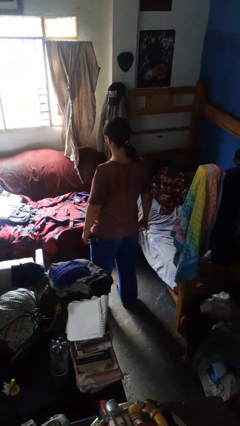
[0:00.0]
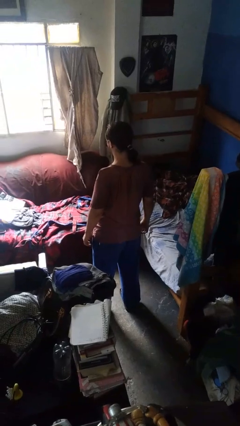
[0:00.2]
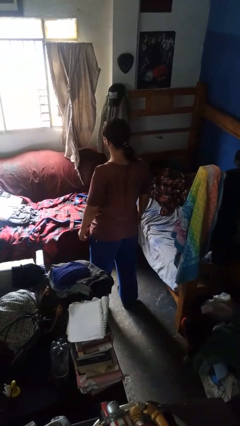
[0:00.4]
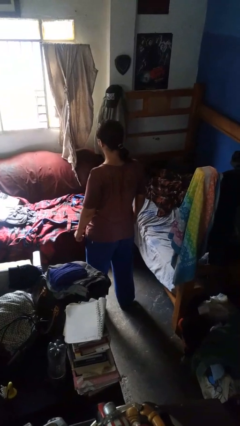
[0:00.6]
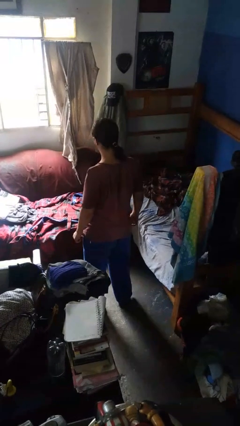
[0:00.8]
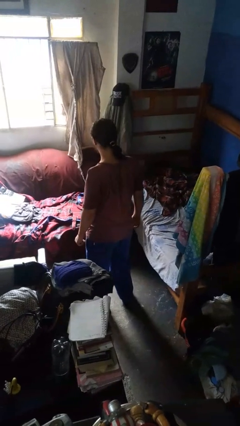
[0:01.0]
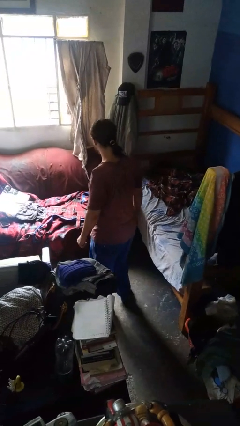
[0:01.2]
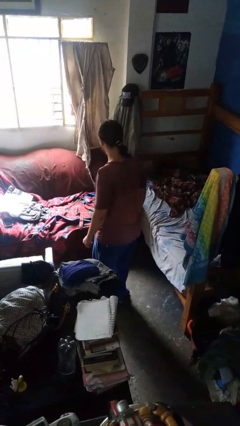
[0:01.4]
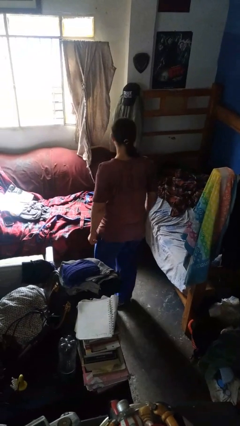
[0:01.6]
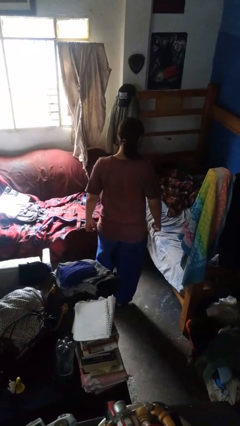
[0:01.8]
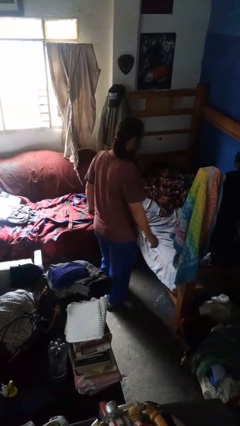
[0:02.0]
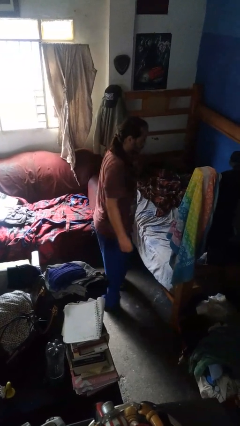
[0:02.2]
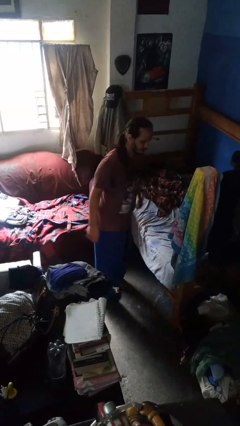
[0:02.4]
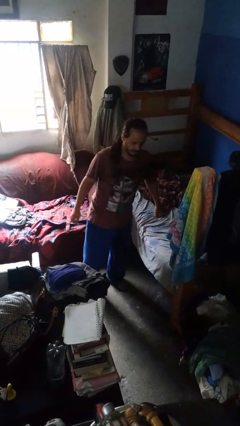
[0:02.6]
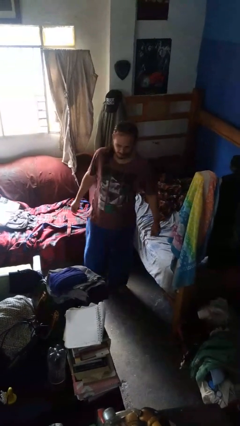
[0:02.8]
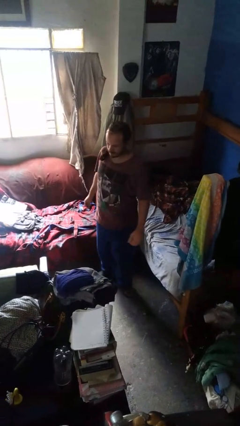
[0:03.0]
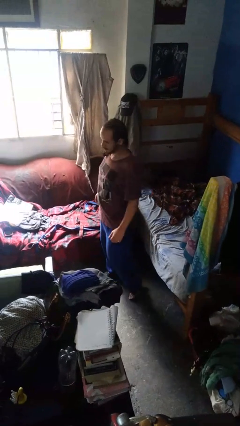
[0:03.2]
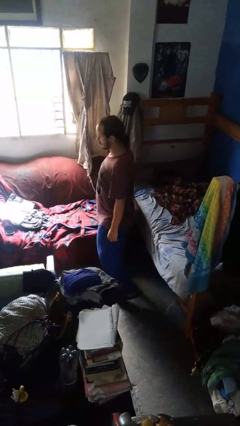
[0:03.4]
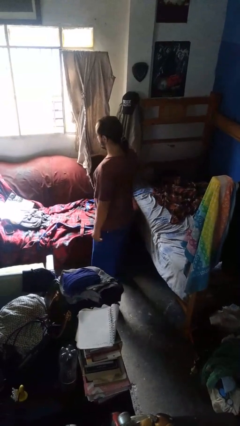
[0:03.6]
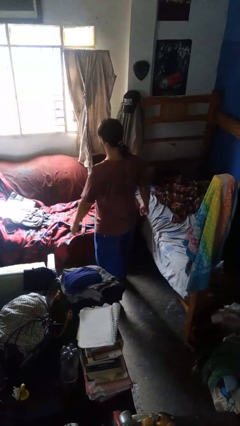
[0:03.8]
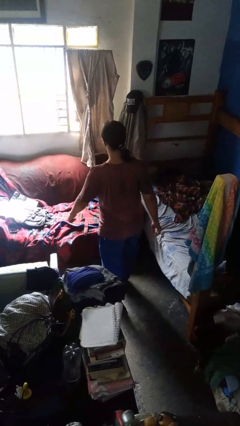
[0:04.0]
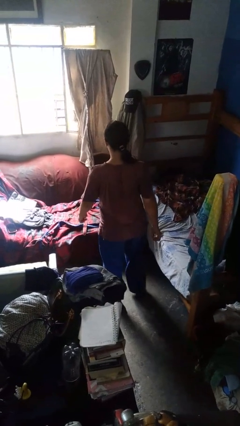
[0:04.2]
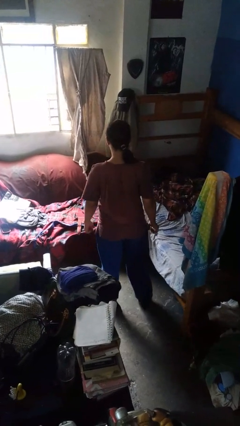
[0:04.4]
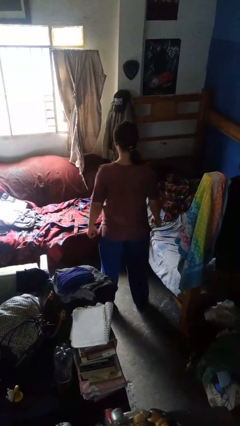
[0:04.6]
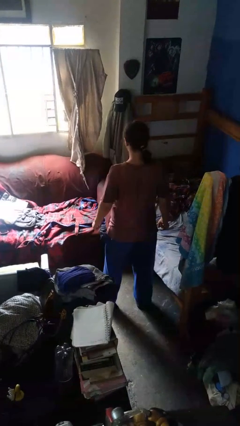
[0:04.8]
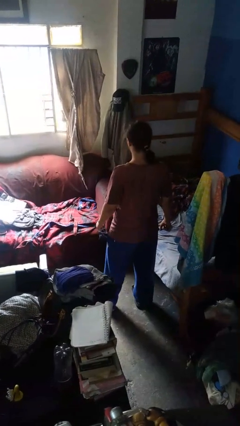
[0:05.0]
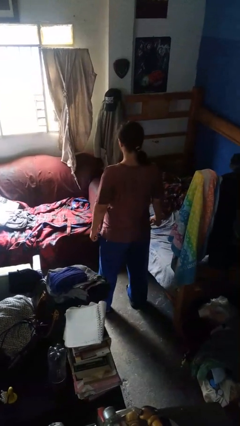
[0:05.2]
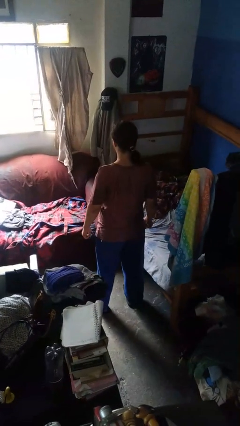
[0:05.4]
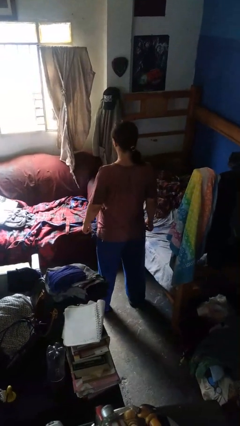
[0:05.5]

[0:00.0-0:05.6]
person twirls

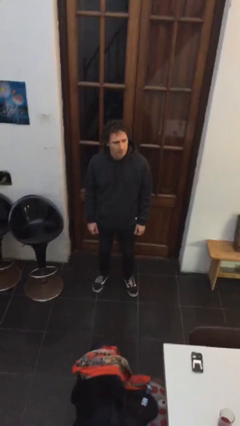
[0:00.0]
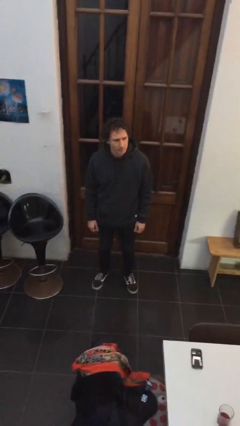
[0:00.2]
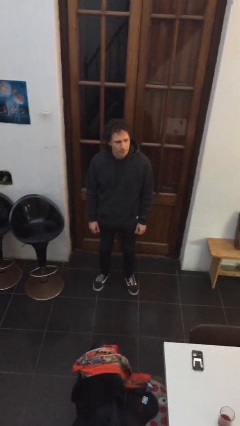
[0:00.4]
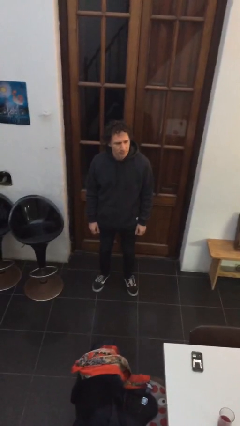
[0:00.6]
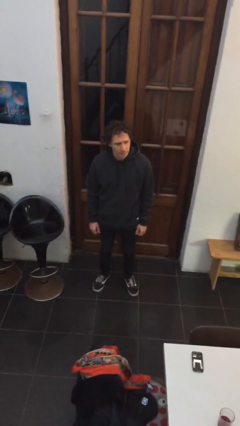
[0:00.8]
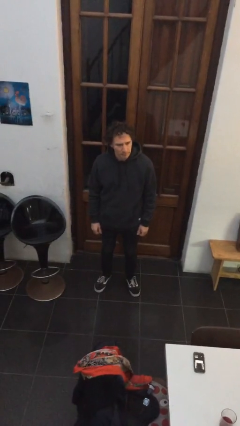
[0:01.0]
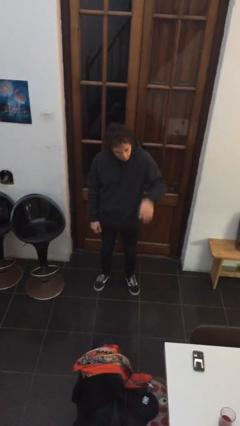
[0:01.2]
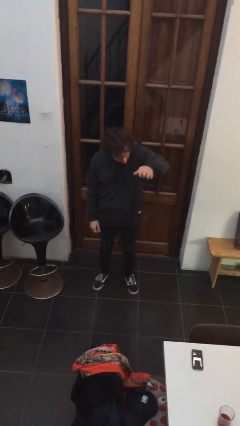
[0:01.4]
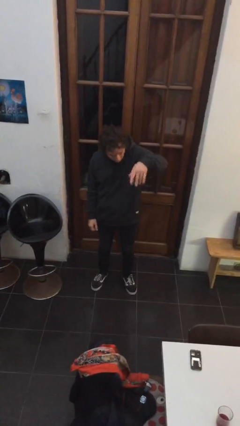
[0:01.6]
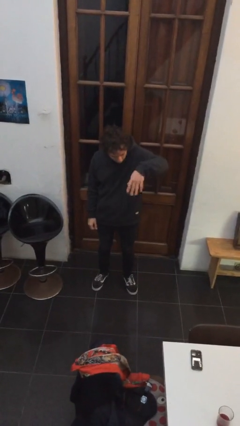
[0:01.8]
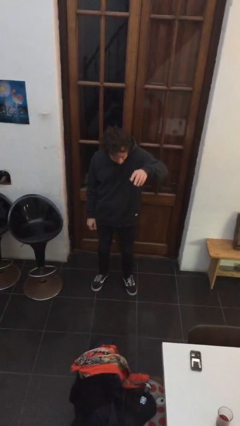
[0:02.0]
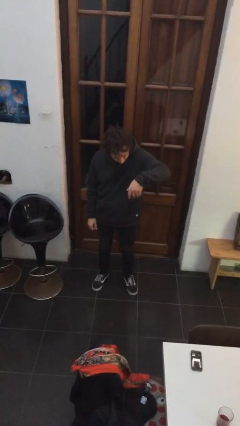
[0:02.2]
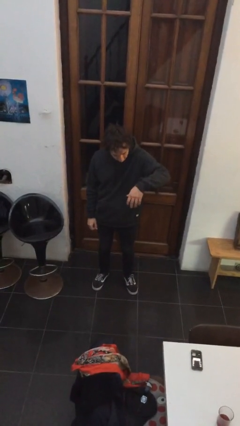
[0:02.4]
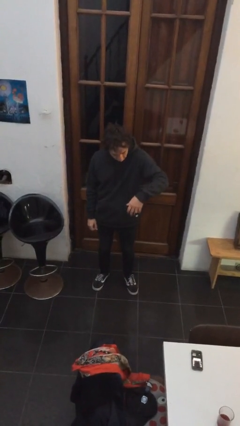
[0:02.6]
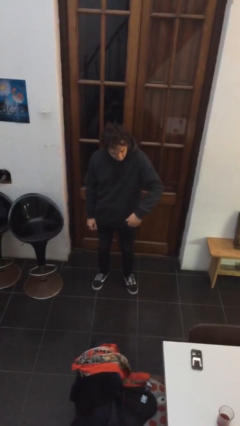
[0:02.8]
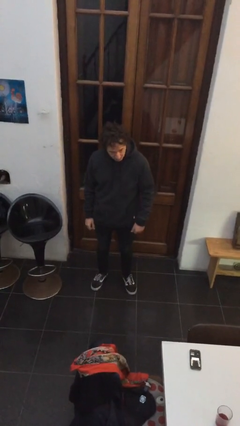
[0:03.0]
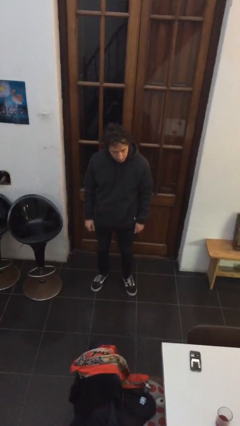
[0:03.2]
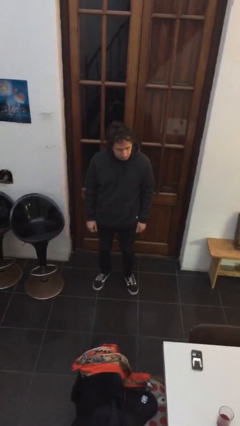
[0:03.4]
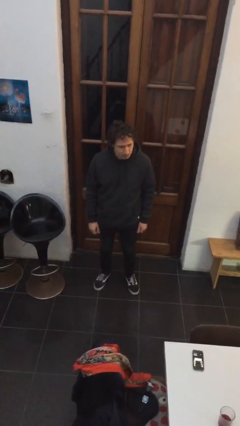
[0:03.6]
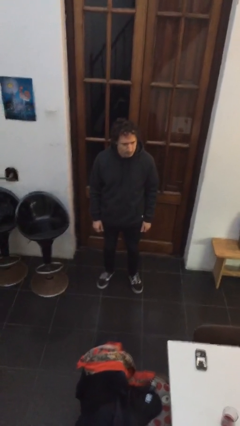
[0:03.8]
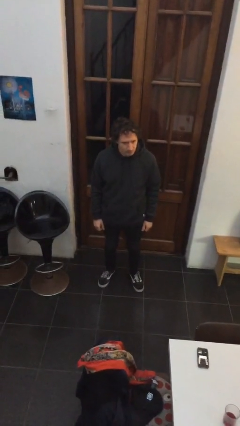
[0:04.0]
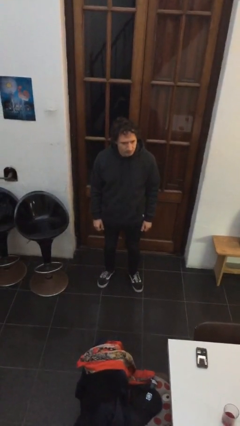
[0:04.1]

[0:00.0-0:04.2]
person gestures come here

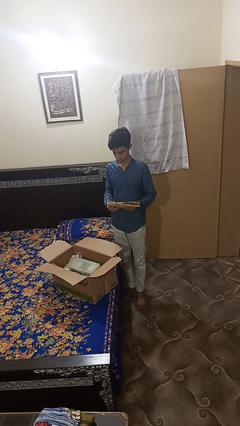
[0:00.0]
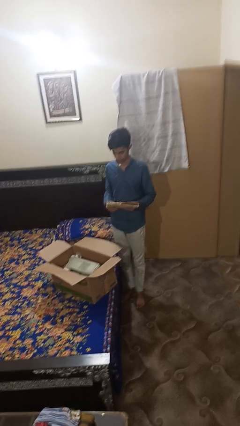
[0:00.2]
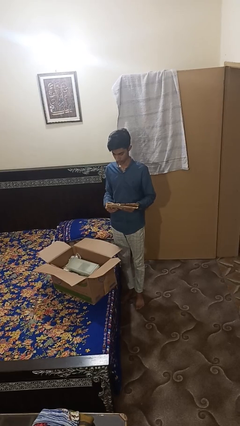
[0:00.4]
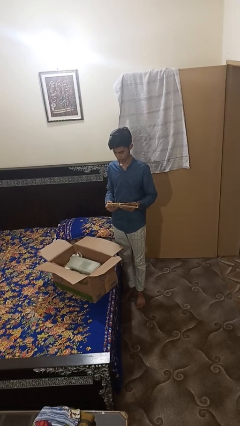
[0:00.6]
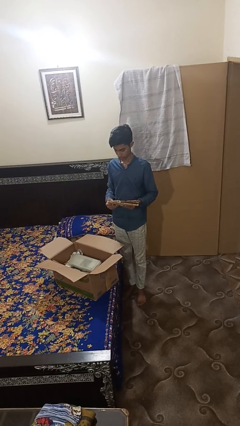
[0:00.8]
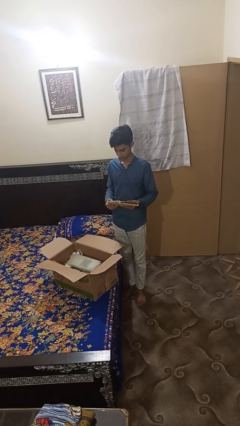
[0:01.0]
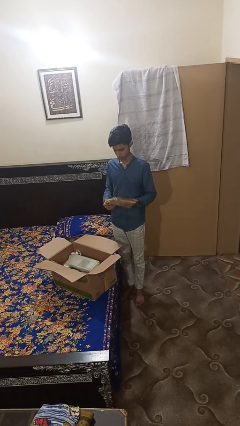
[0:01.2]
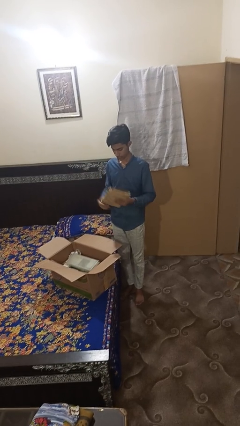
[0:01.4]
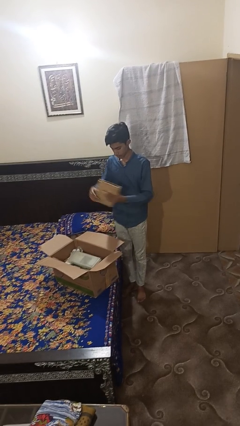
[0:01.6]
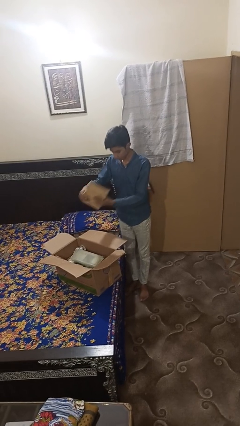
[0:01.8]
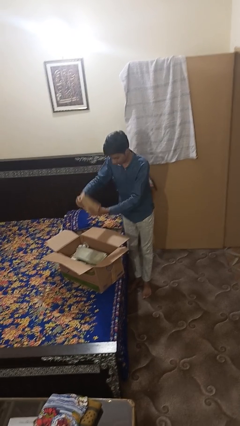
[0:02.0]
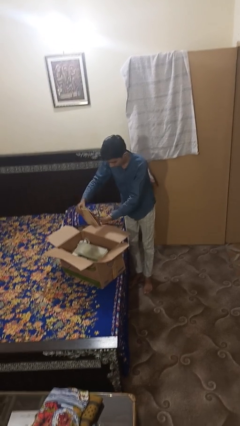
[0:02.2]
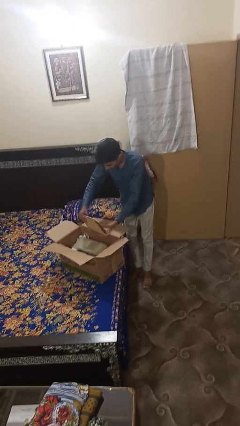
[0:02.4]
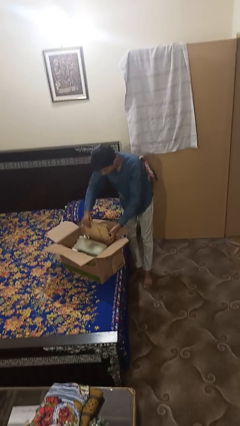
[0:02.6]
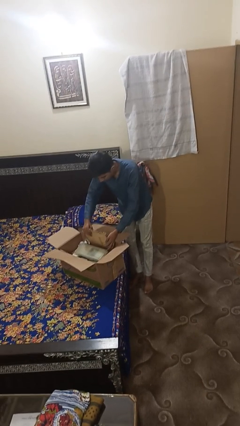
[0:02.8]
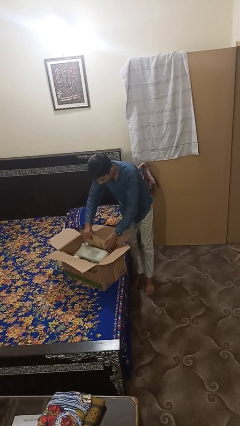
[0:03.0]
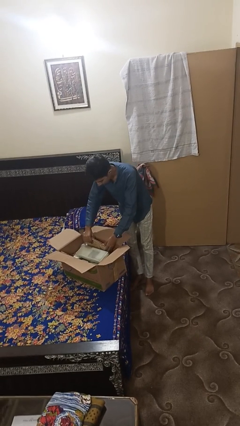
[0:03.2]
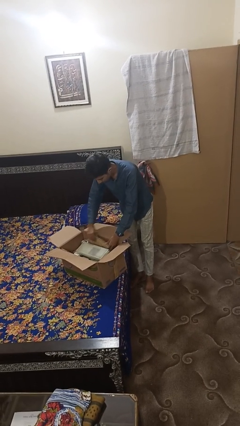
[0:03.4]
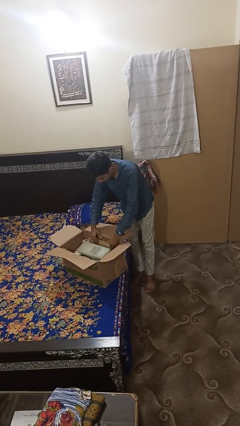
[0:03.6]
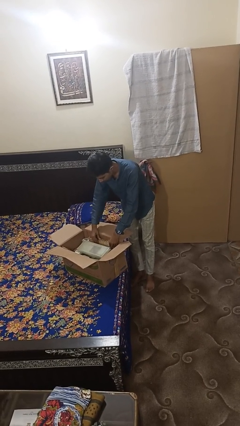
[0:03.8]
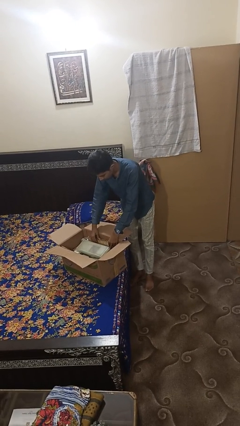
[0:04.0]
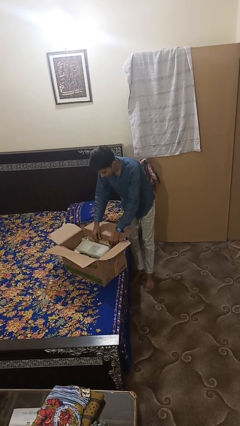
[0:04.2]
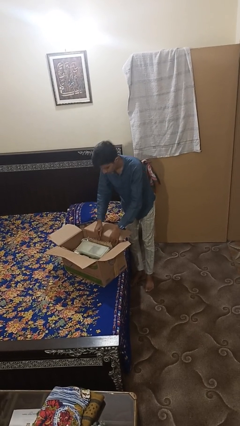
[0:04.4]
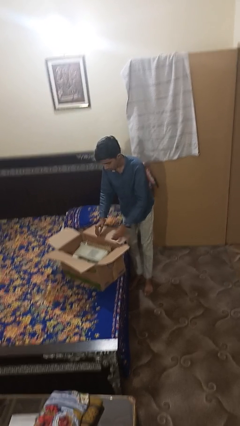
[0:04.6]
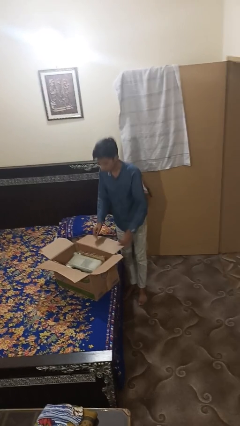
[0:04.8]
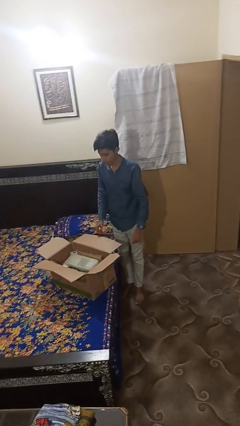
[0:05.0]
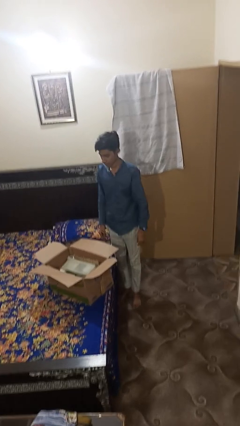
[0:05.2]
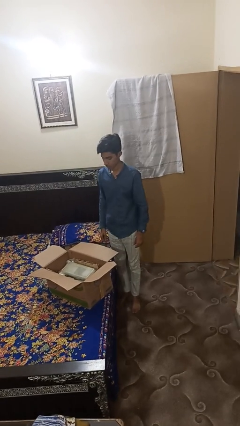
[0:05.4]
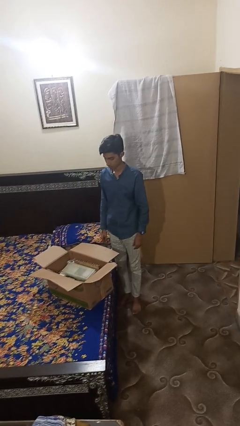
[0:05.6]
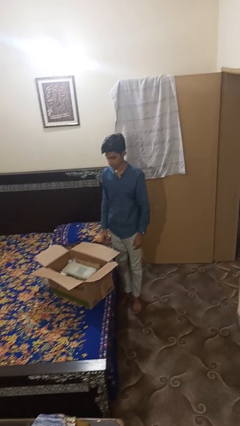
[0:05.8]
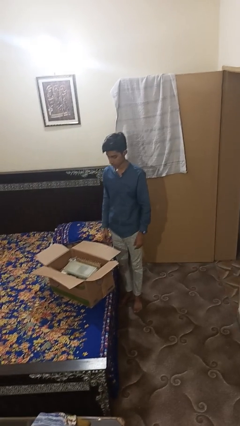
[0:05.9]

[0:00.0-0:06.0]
person puts object into box

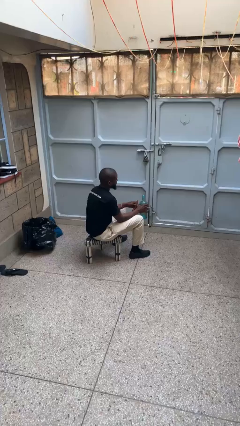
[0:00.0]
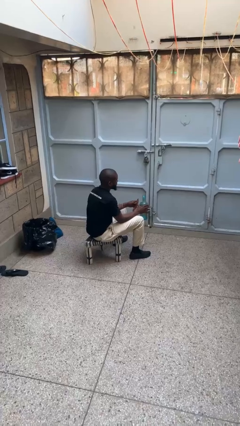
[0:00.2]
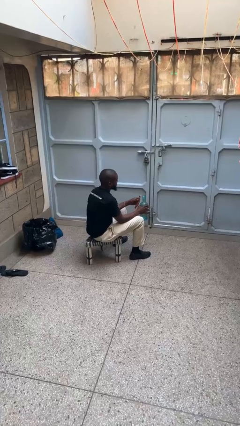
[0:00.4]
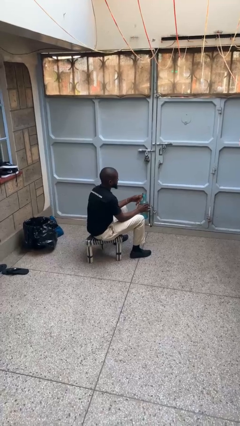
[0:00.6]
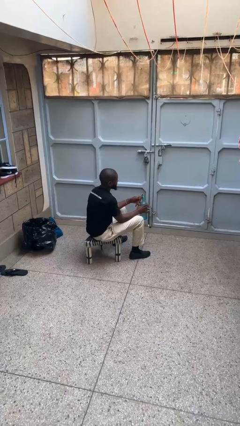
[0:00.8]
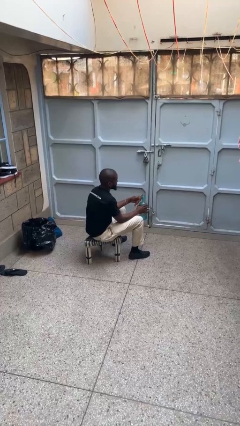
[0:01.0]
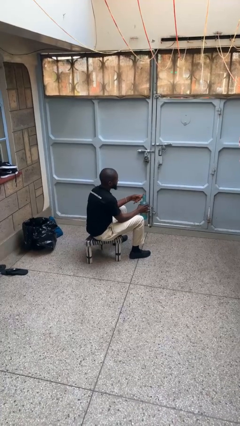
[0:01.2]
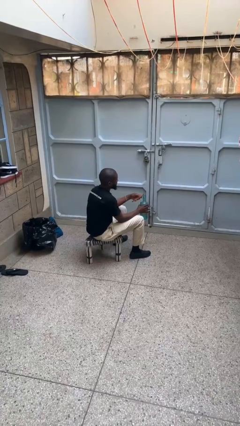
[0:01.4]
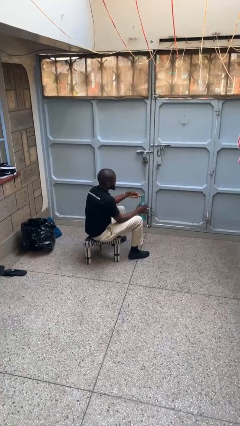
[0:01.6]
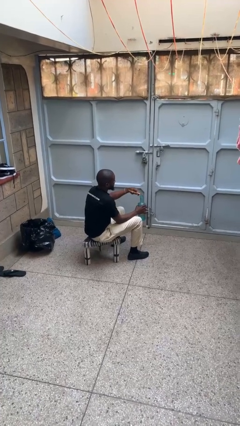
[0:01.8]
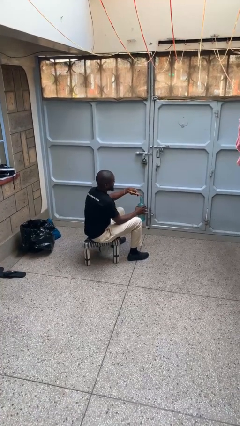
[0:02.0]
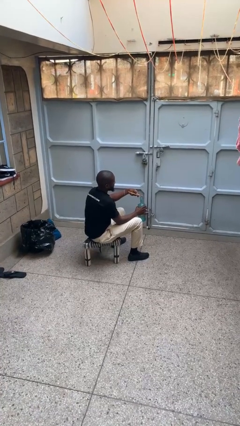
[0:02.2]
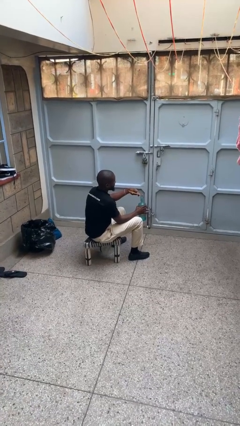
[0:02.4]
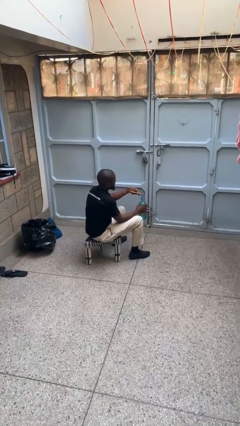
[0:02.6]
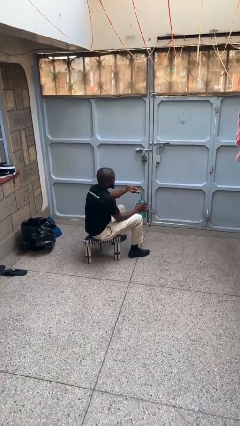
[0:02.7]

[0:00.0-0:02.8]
person opens can with can opener
